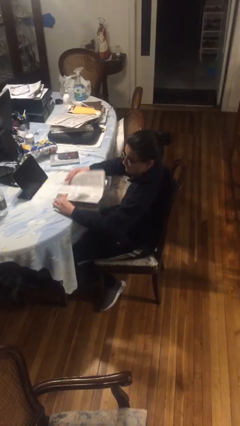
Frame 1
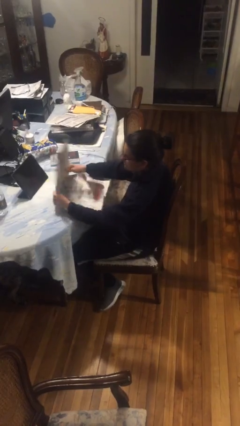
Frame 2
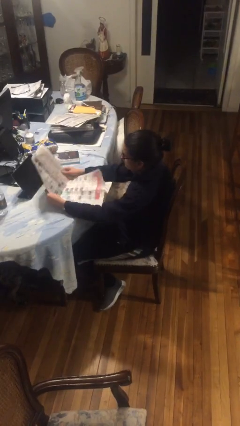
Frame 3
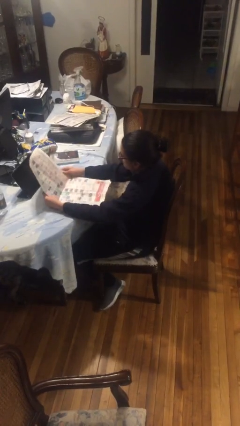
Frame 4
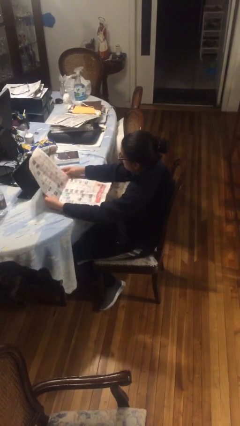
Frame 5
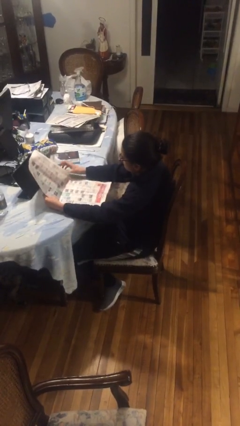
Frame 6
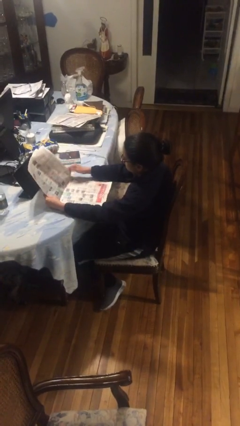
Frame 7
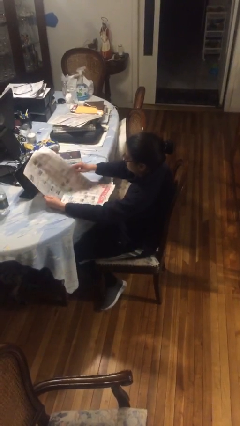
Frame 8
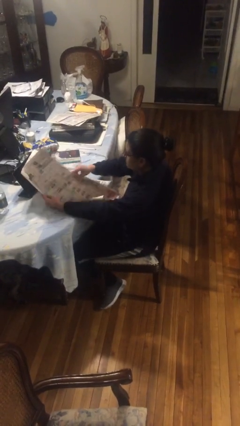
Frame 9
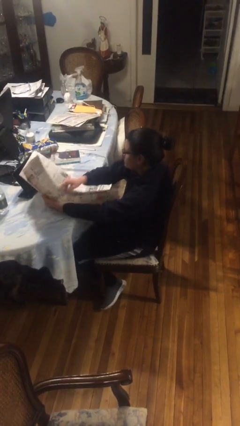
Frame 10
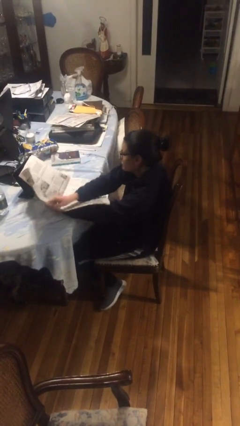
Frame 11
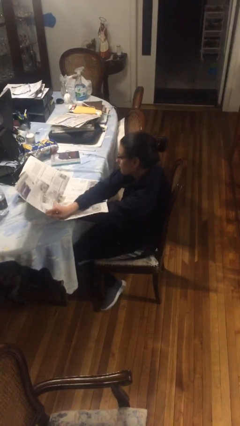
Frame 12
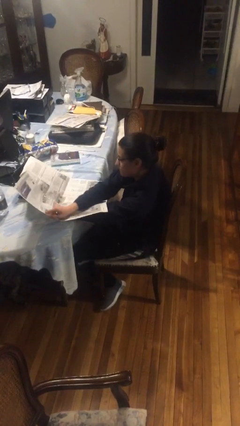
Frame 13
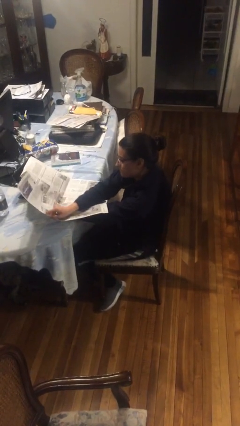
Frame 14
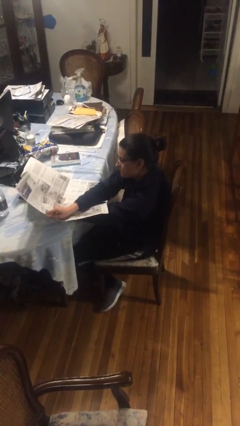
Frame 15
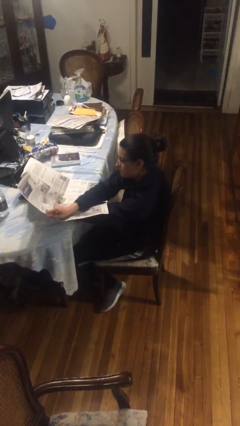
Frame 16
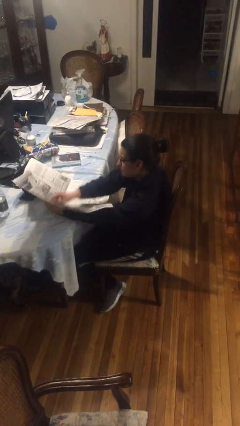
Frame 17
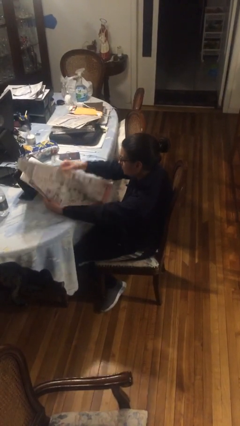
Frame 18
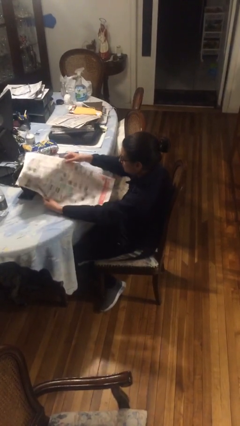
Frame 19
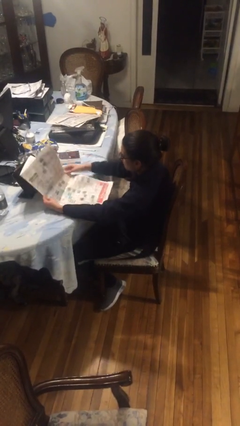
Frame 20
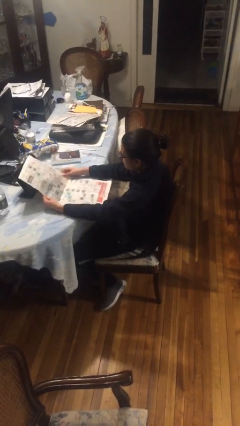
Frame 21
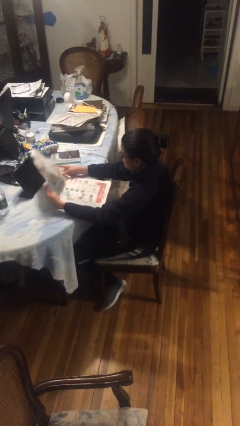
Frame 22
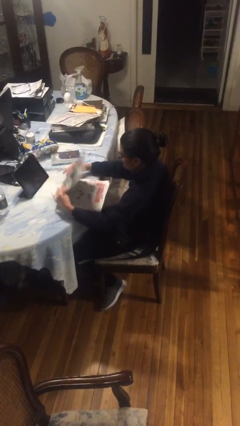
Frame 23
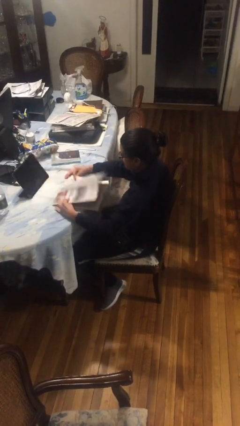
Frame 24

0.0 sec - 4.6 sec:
person reads newspaper

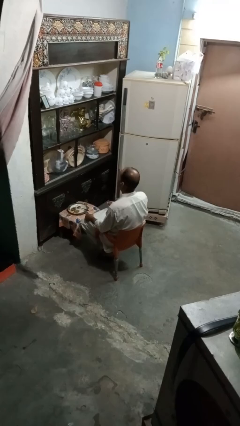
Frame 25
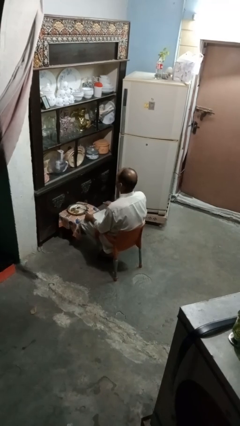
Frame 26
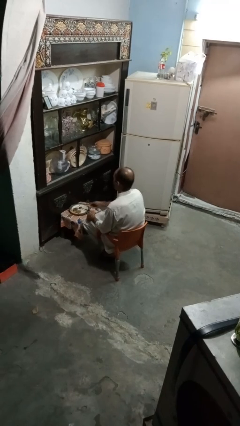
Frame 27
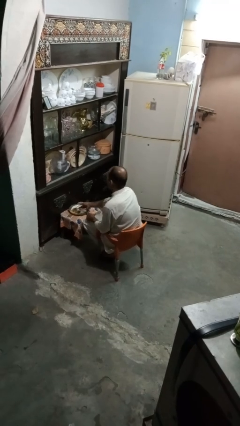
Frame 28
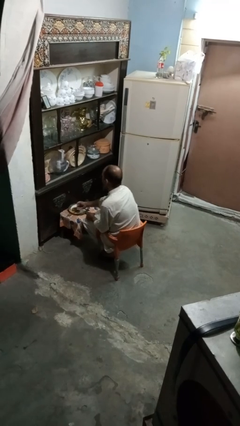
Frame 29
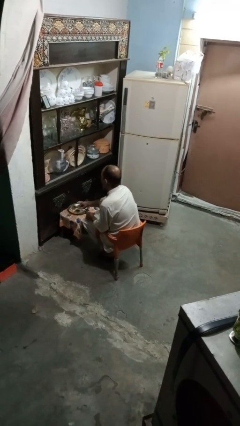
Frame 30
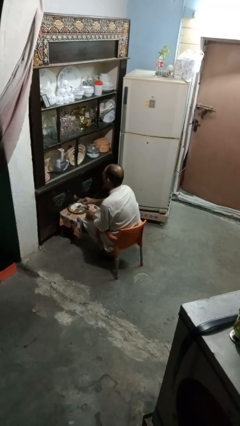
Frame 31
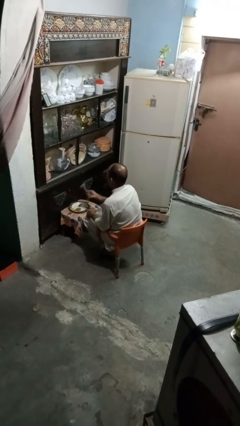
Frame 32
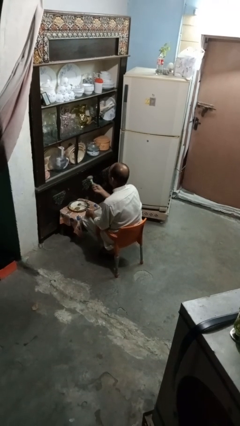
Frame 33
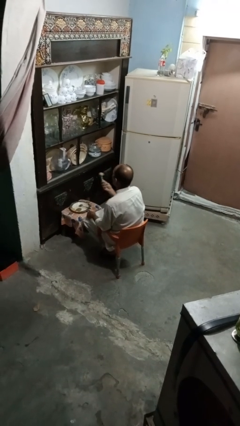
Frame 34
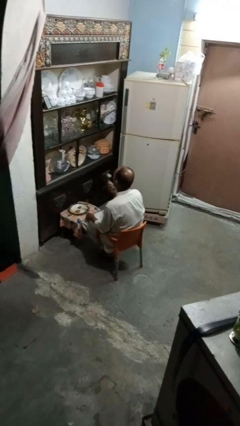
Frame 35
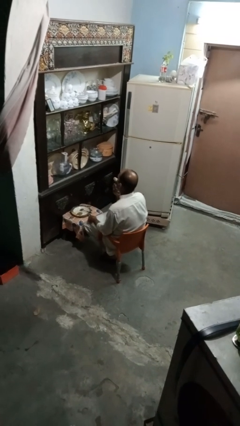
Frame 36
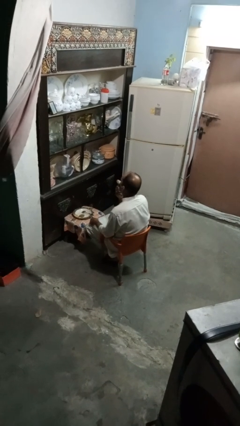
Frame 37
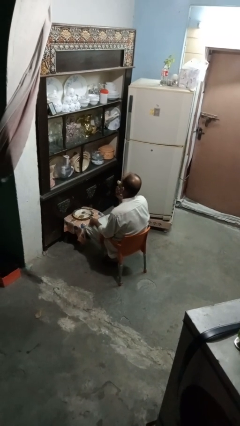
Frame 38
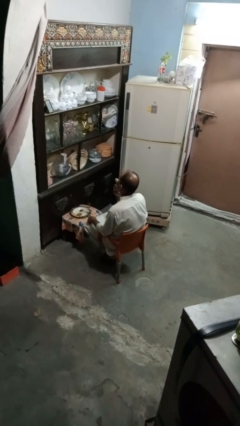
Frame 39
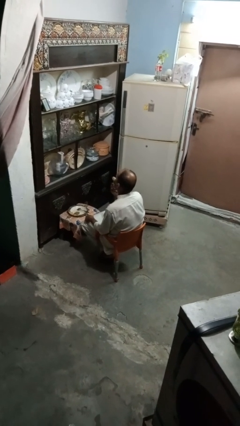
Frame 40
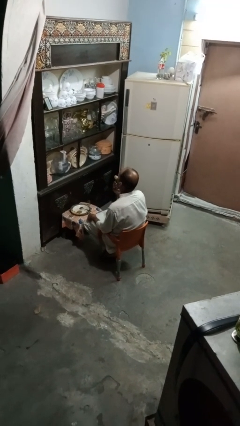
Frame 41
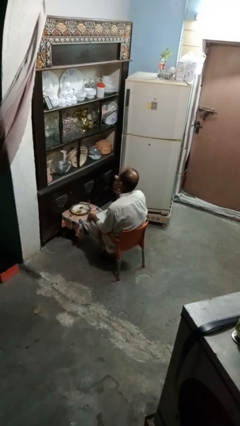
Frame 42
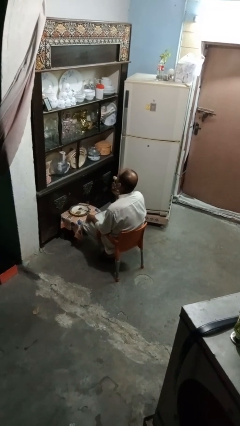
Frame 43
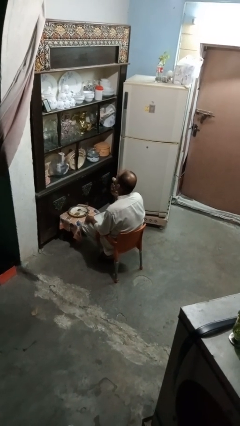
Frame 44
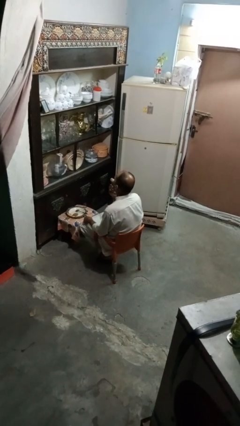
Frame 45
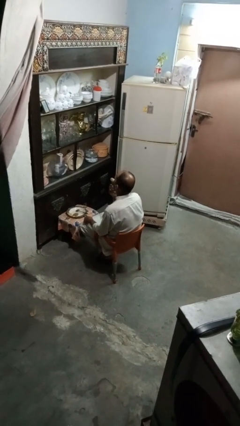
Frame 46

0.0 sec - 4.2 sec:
person eats with utensil

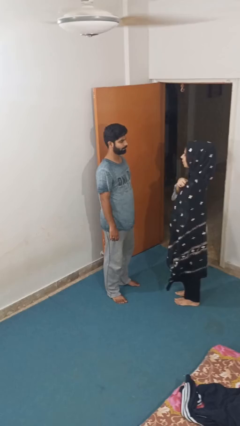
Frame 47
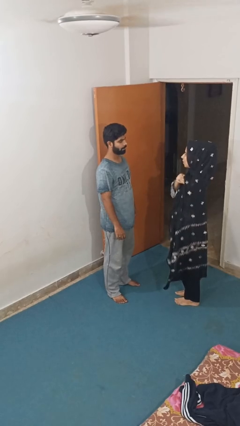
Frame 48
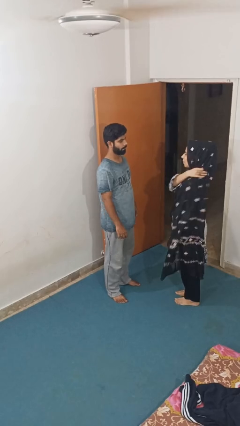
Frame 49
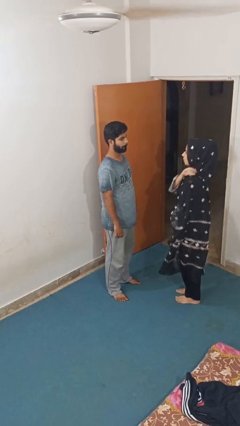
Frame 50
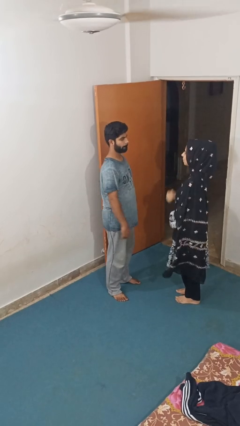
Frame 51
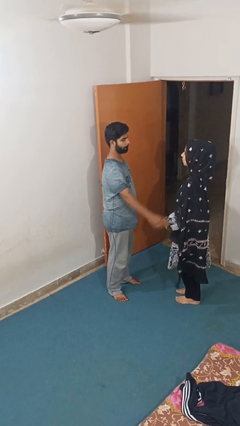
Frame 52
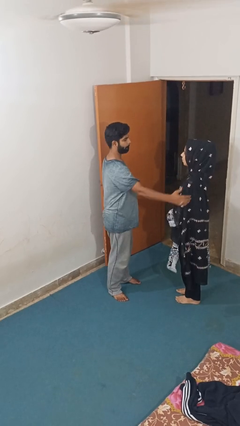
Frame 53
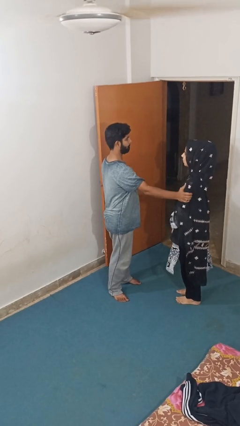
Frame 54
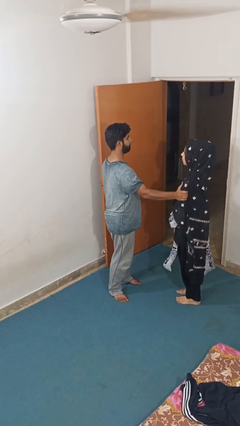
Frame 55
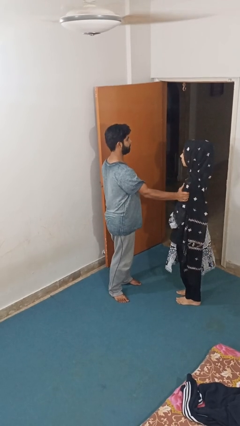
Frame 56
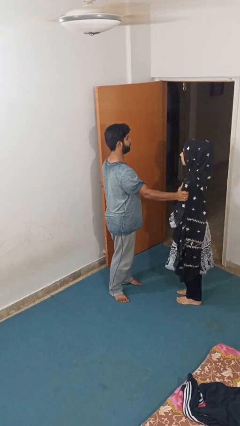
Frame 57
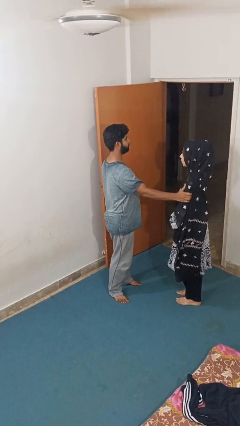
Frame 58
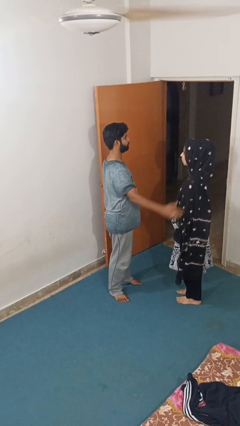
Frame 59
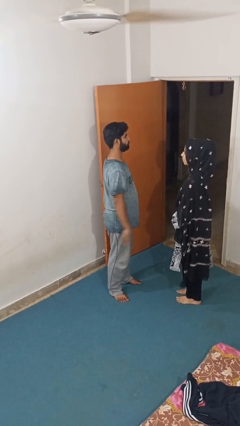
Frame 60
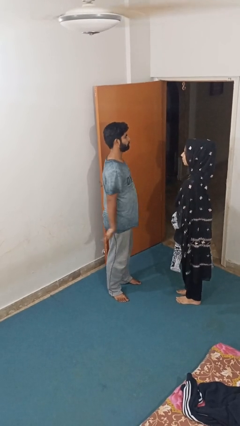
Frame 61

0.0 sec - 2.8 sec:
person grabs person by bicep

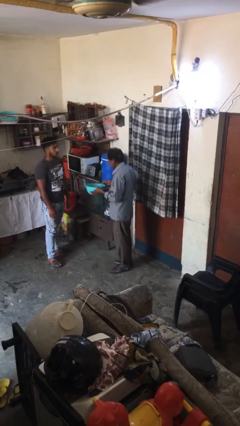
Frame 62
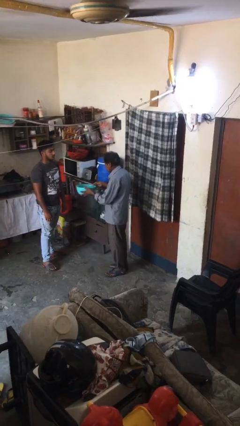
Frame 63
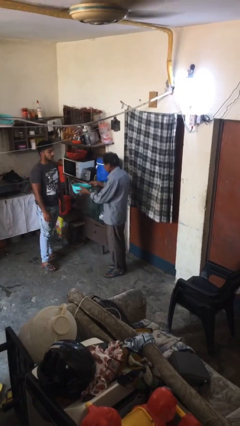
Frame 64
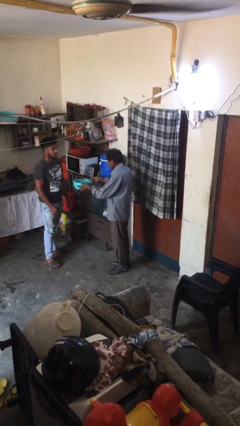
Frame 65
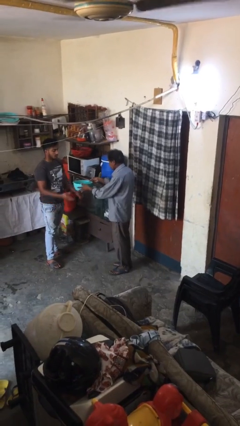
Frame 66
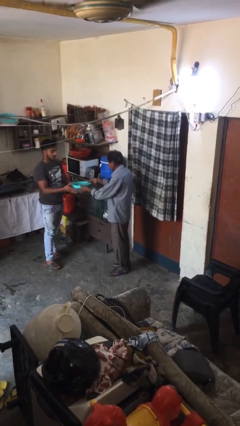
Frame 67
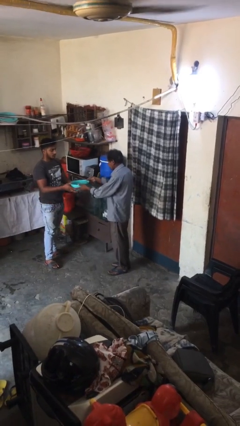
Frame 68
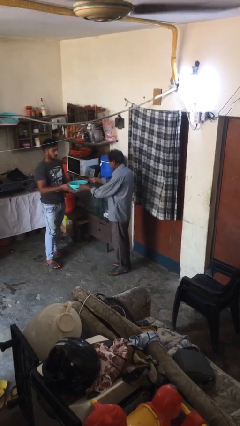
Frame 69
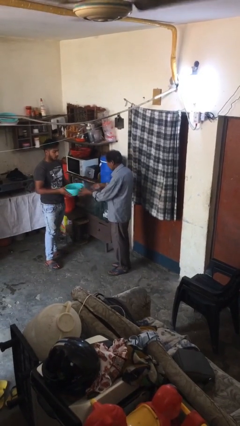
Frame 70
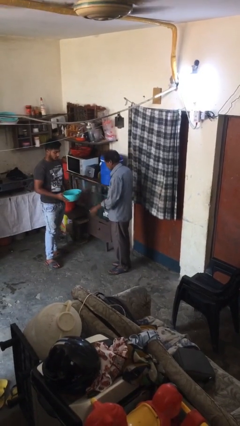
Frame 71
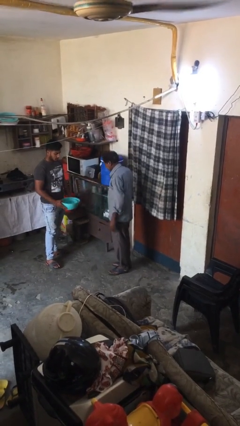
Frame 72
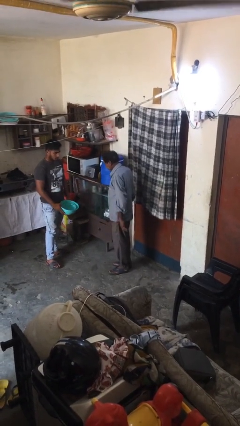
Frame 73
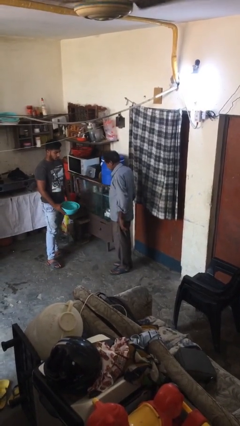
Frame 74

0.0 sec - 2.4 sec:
person transfers object to person

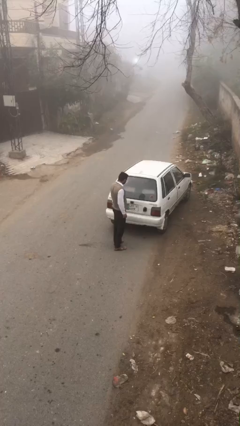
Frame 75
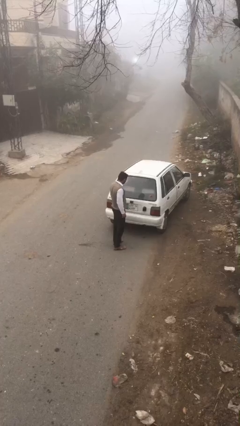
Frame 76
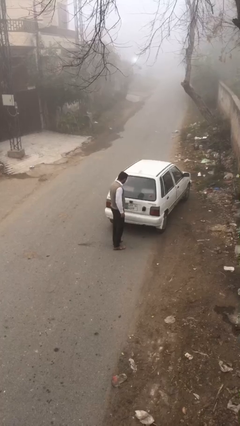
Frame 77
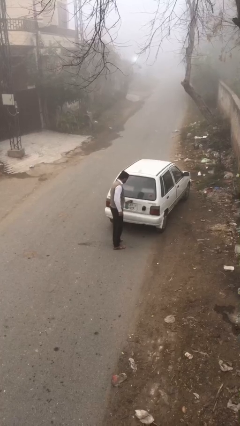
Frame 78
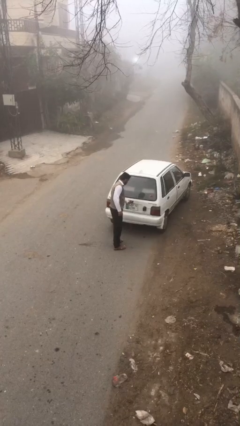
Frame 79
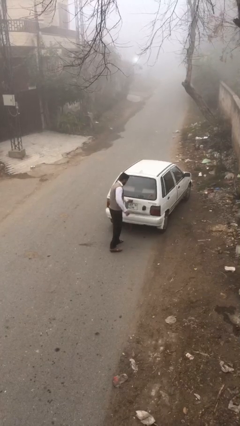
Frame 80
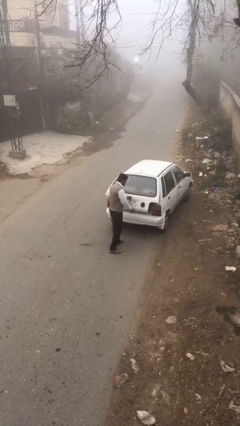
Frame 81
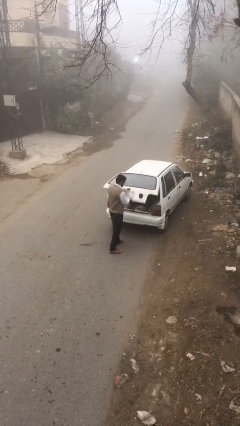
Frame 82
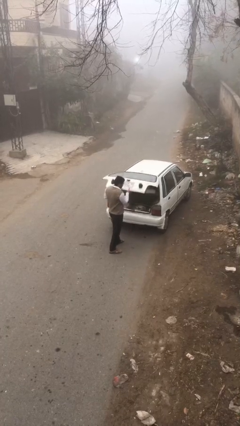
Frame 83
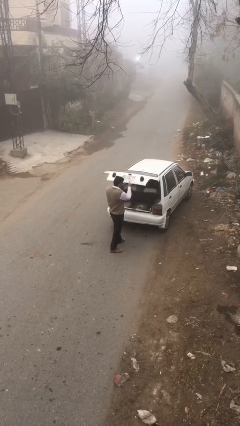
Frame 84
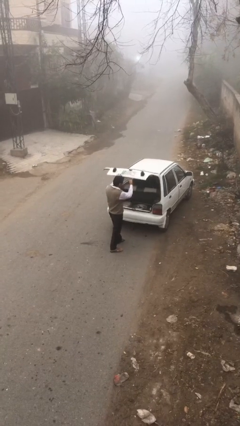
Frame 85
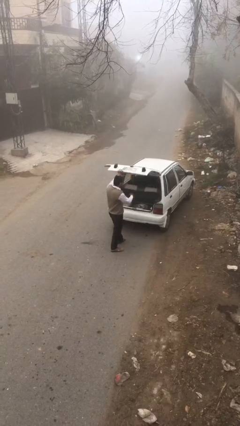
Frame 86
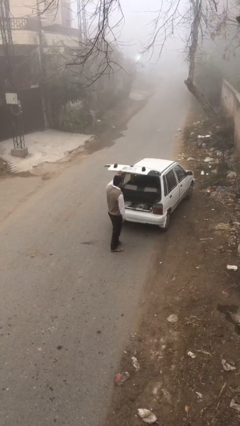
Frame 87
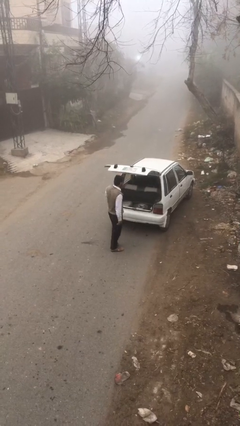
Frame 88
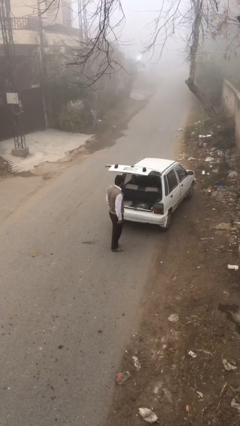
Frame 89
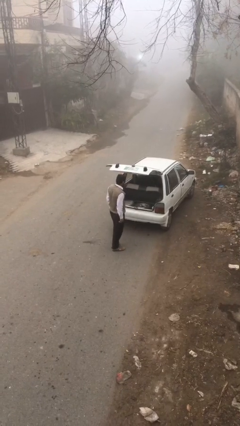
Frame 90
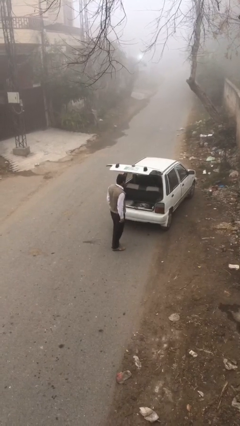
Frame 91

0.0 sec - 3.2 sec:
person opens car trunk

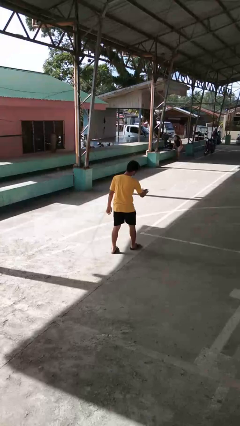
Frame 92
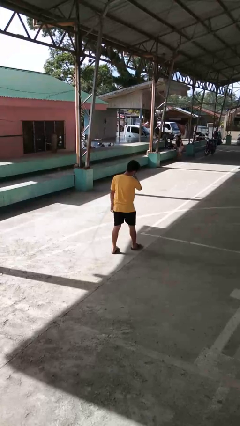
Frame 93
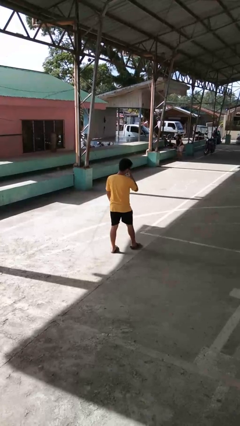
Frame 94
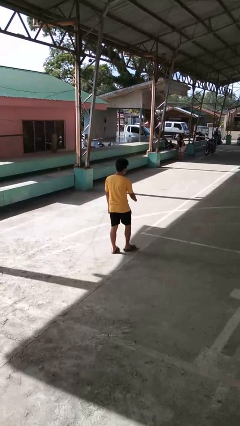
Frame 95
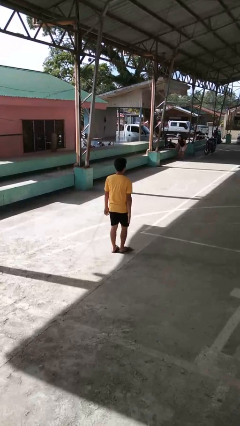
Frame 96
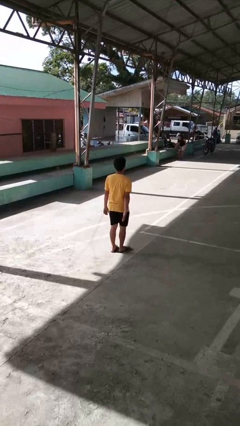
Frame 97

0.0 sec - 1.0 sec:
person karate chop
